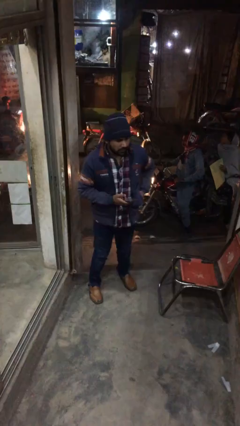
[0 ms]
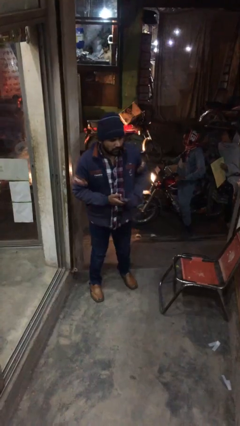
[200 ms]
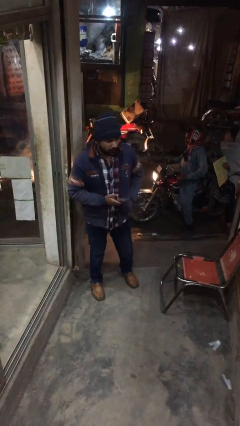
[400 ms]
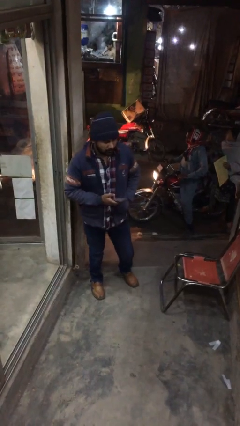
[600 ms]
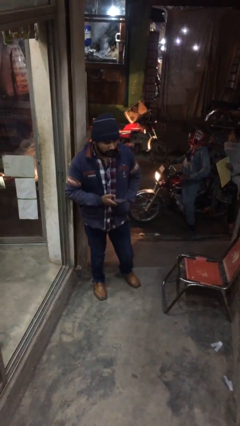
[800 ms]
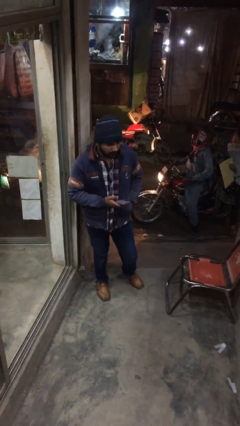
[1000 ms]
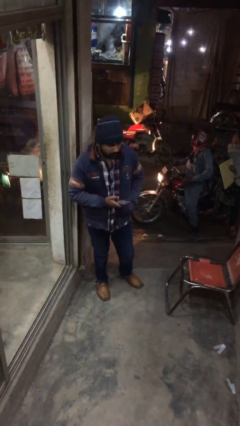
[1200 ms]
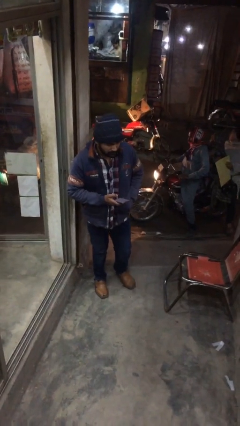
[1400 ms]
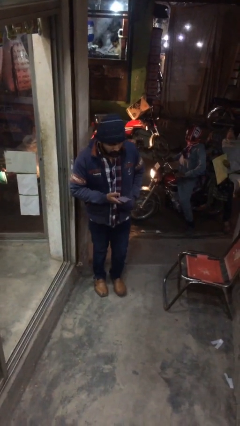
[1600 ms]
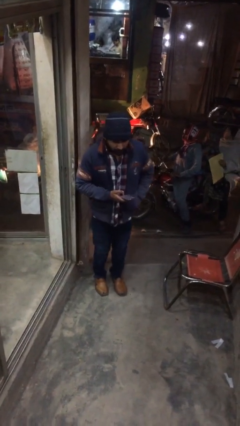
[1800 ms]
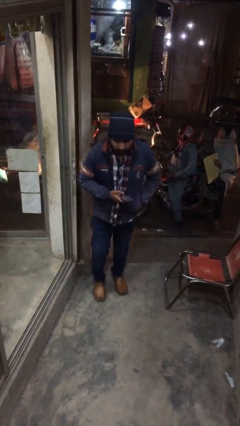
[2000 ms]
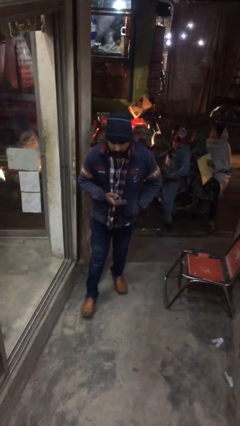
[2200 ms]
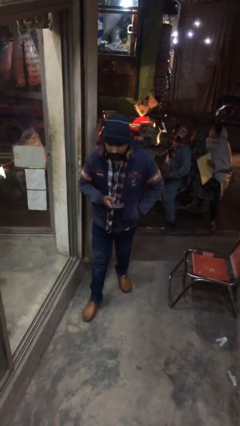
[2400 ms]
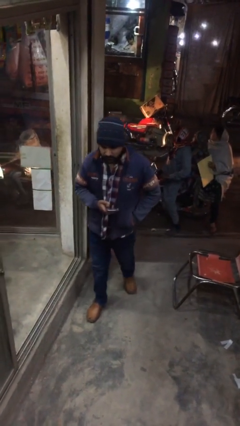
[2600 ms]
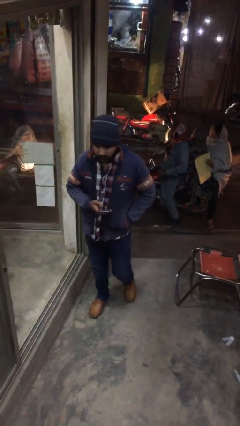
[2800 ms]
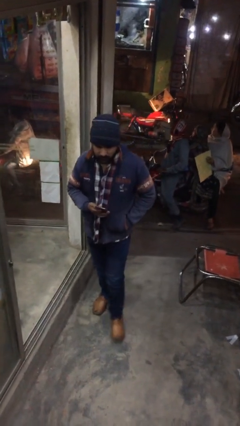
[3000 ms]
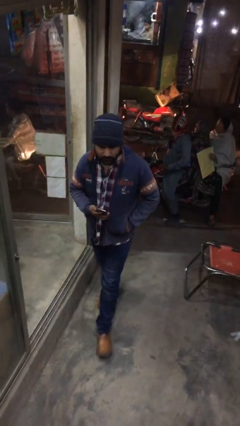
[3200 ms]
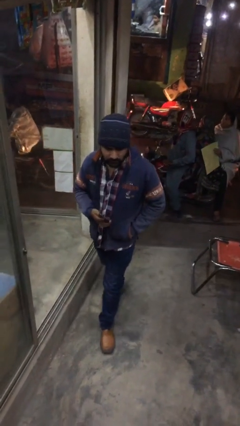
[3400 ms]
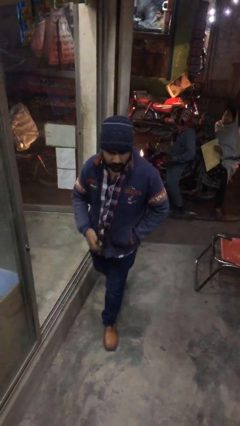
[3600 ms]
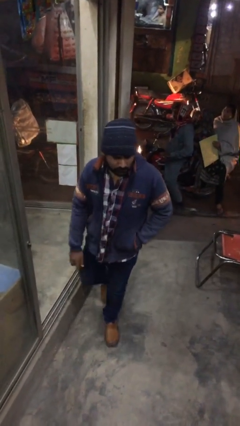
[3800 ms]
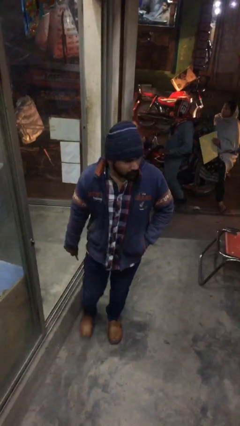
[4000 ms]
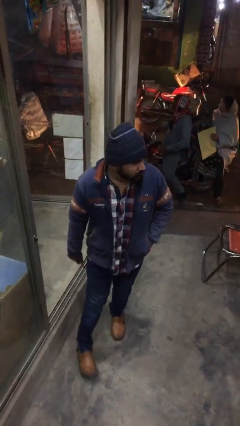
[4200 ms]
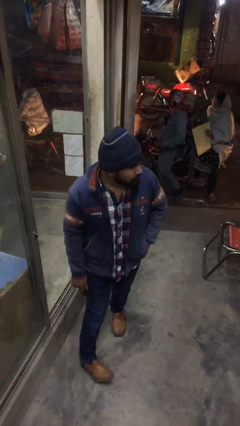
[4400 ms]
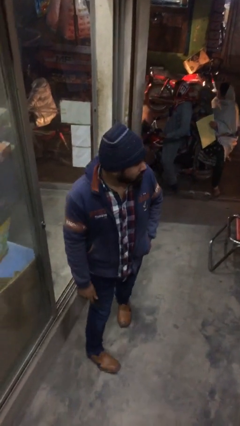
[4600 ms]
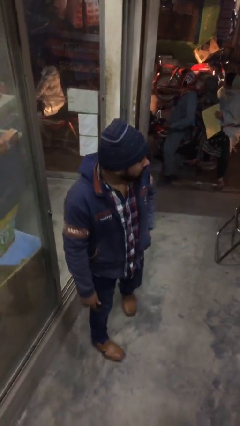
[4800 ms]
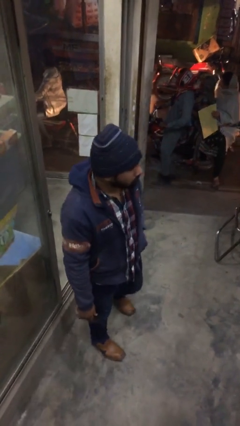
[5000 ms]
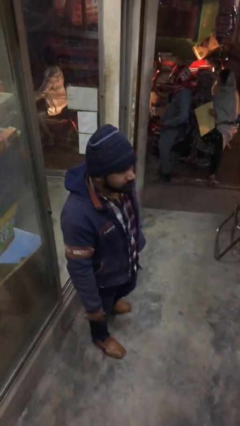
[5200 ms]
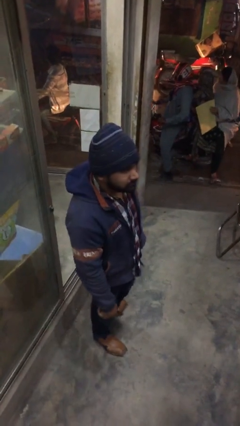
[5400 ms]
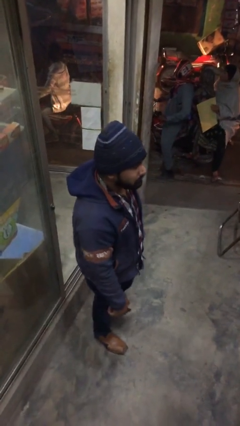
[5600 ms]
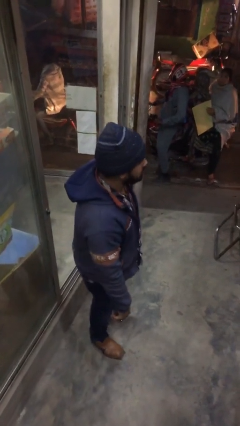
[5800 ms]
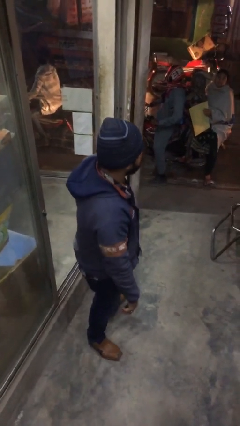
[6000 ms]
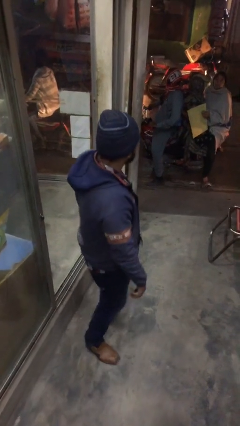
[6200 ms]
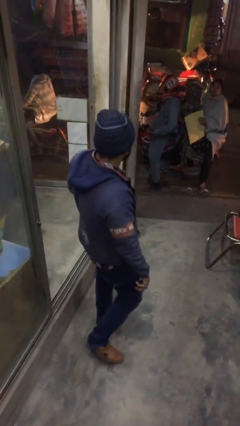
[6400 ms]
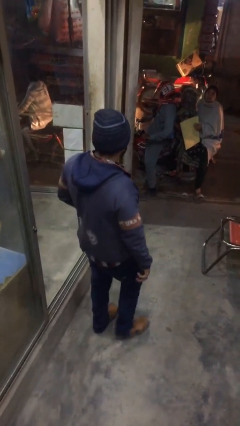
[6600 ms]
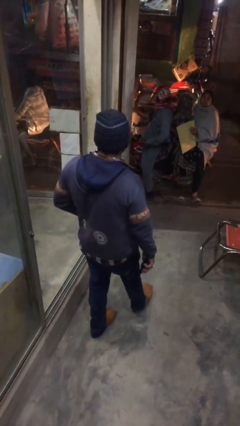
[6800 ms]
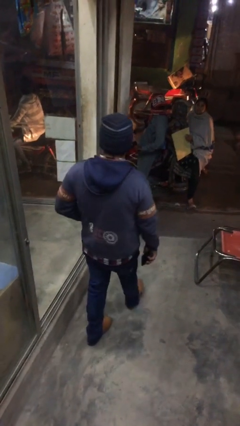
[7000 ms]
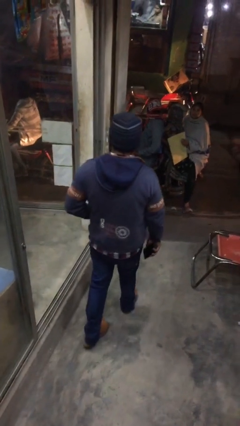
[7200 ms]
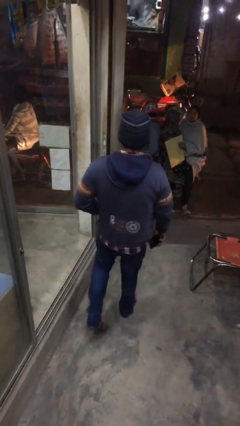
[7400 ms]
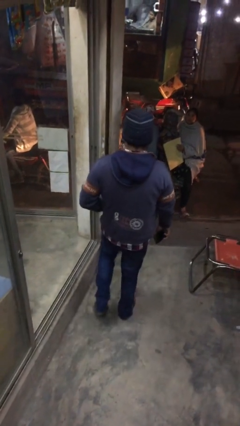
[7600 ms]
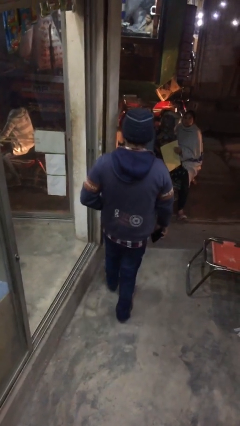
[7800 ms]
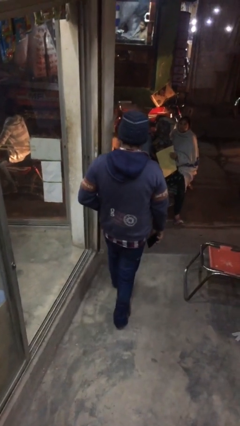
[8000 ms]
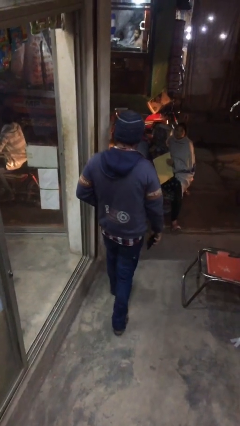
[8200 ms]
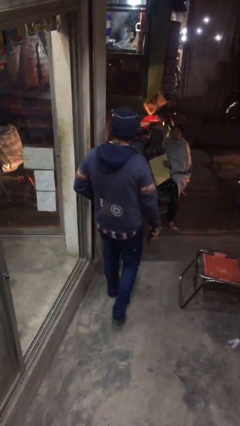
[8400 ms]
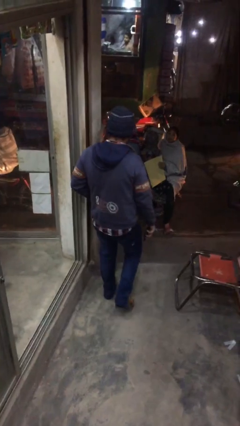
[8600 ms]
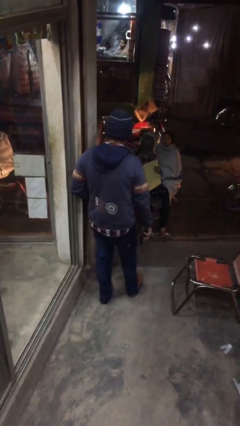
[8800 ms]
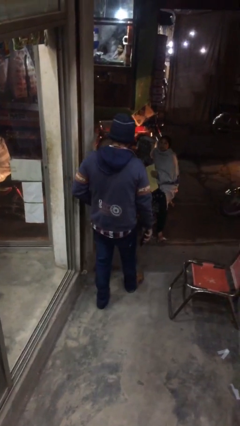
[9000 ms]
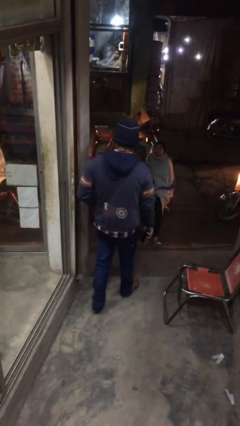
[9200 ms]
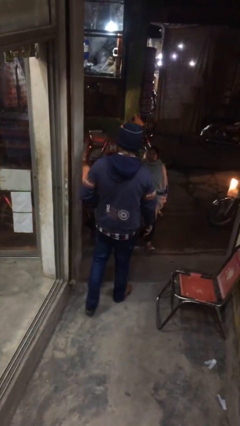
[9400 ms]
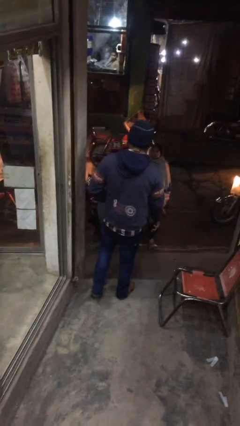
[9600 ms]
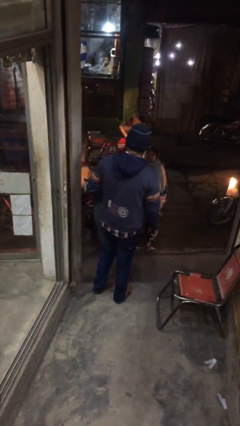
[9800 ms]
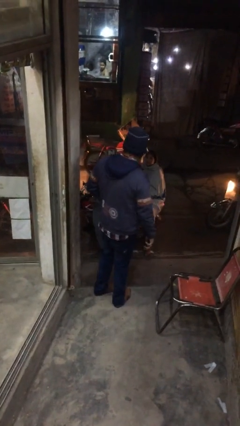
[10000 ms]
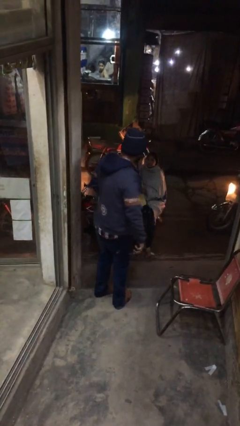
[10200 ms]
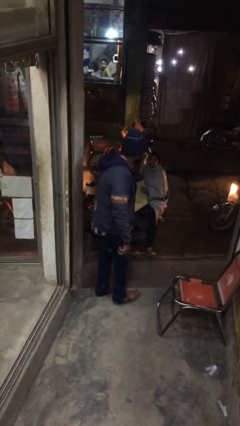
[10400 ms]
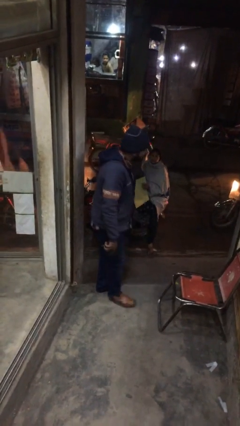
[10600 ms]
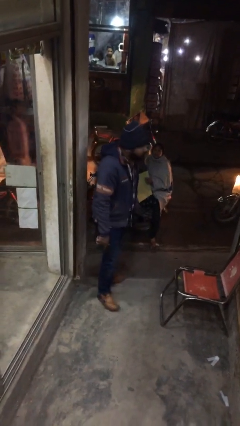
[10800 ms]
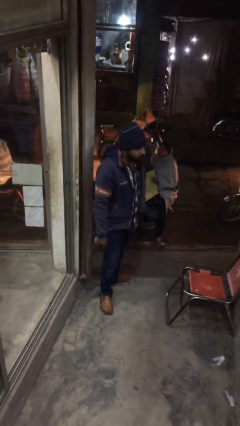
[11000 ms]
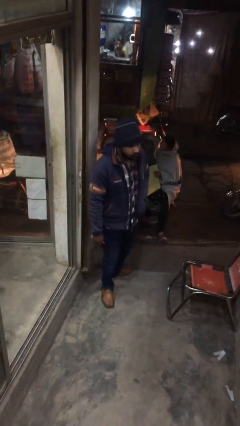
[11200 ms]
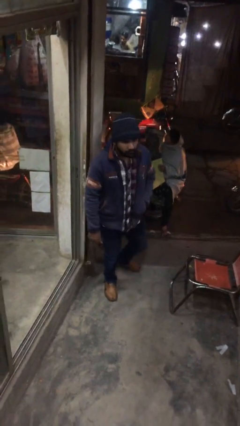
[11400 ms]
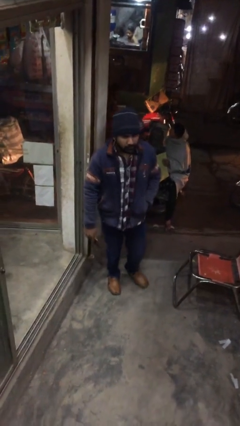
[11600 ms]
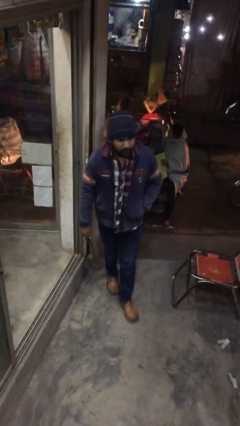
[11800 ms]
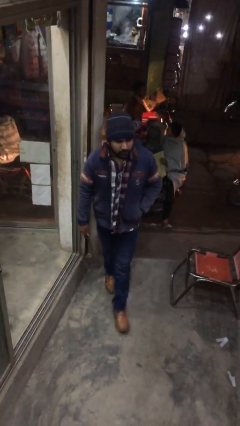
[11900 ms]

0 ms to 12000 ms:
person walks

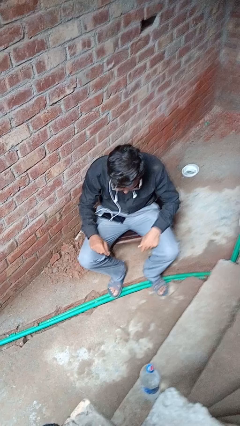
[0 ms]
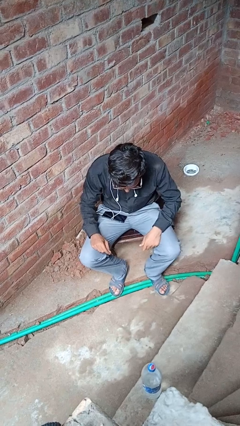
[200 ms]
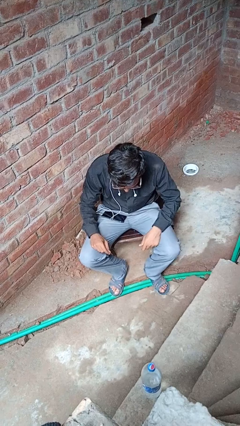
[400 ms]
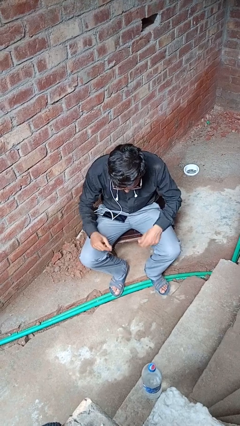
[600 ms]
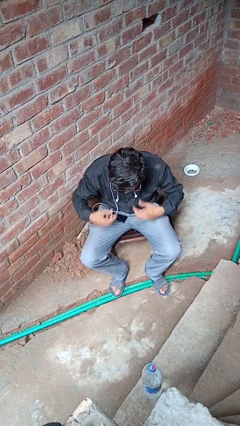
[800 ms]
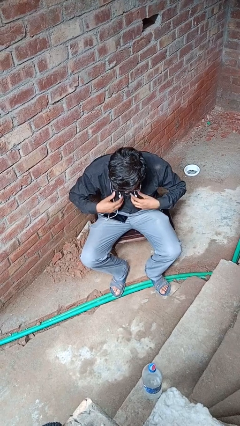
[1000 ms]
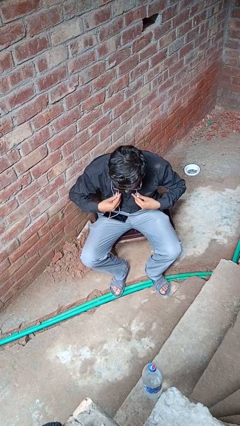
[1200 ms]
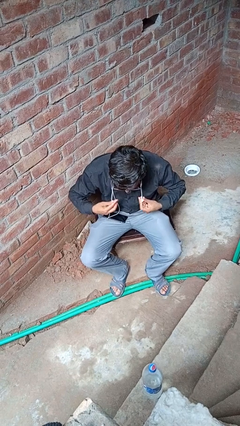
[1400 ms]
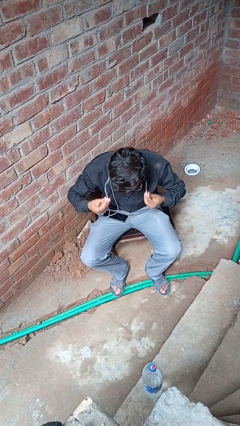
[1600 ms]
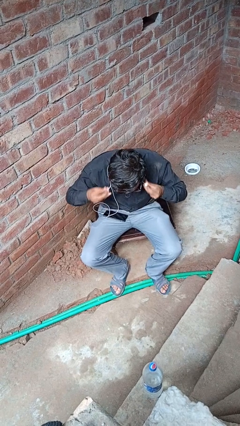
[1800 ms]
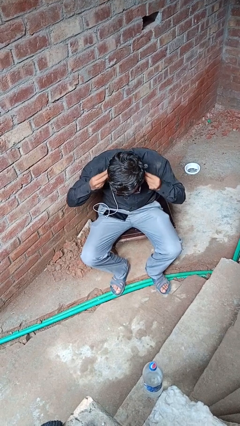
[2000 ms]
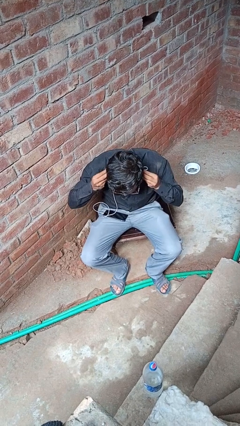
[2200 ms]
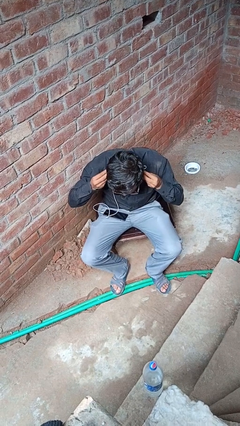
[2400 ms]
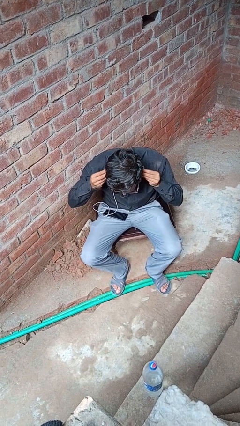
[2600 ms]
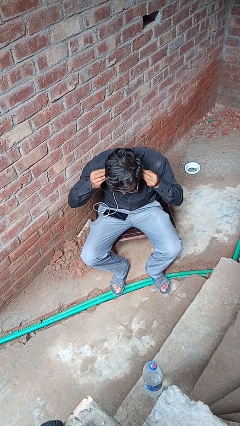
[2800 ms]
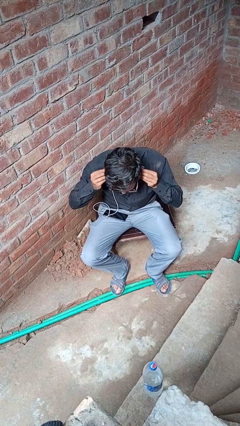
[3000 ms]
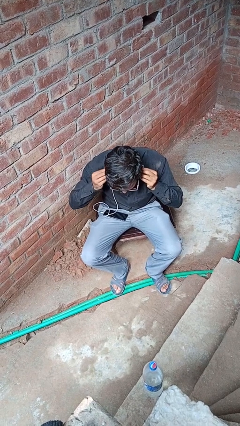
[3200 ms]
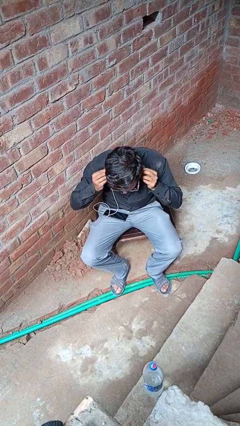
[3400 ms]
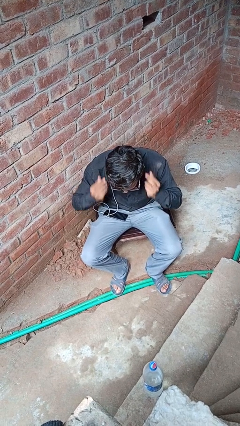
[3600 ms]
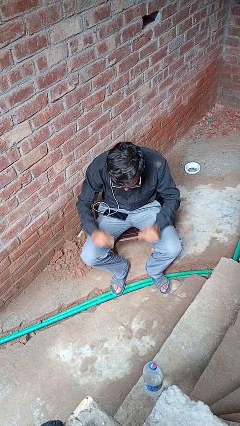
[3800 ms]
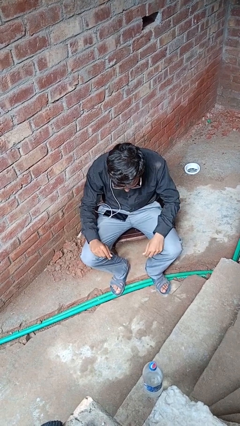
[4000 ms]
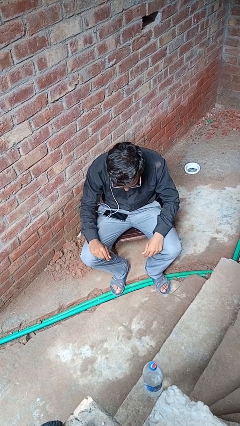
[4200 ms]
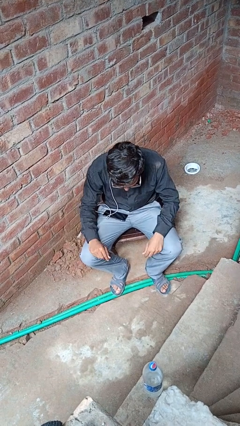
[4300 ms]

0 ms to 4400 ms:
person puts on headphones

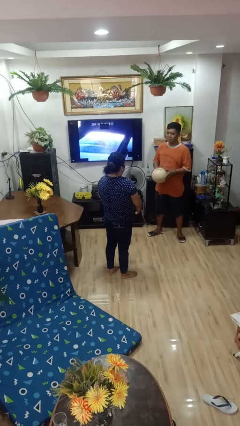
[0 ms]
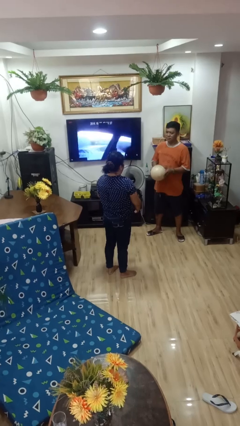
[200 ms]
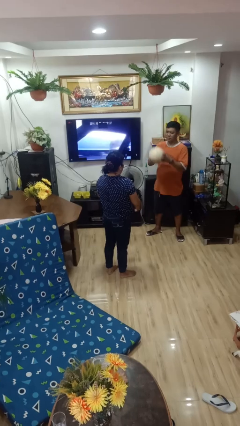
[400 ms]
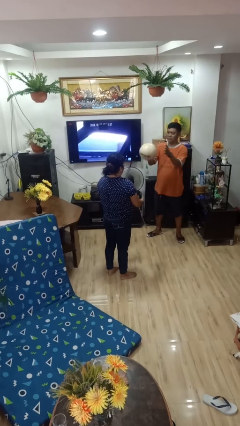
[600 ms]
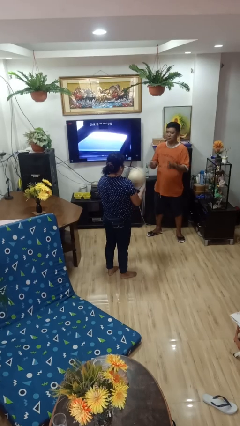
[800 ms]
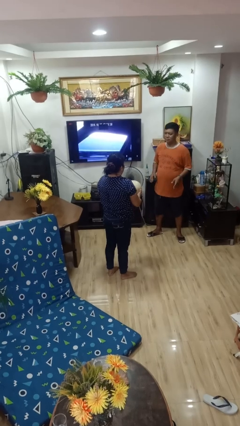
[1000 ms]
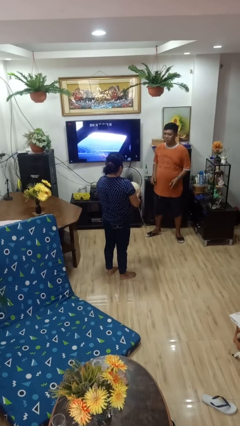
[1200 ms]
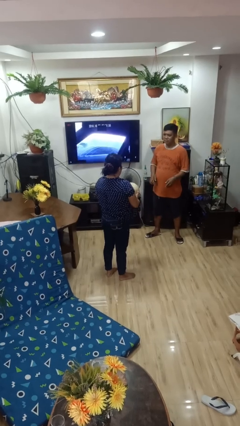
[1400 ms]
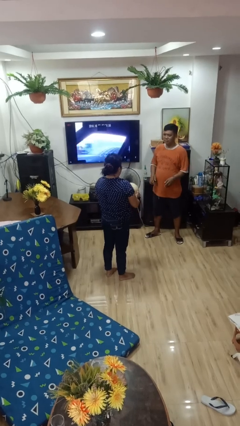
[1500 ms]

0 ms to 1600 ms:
person catches object from person
